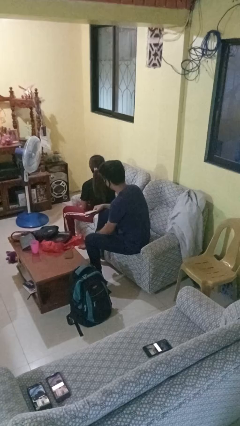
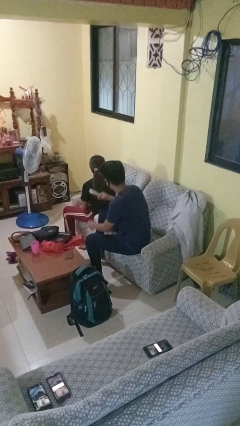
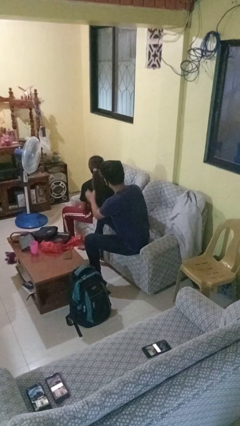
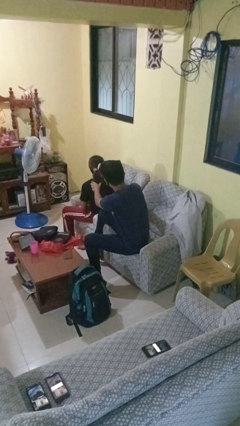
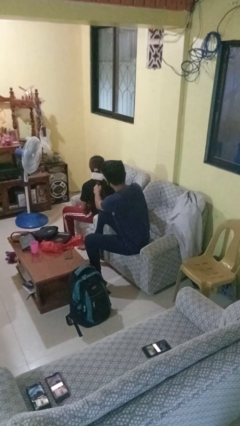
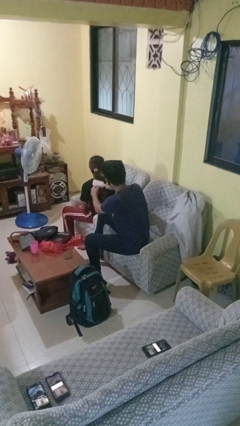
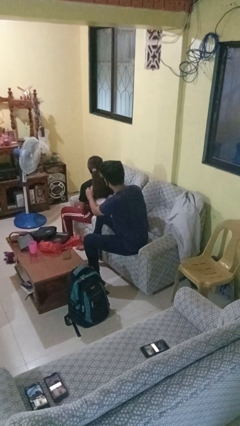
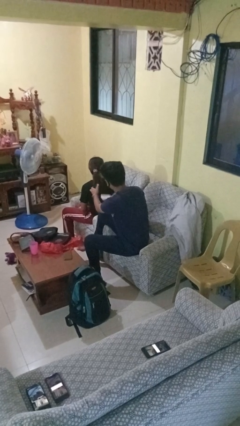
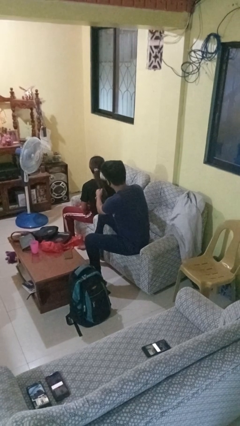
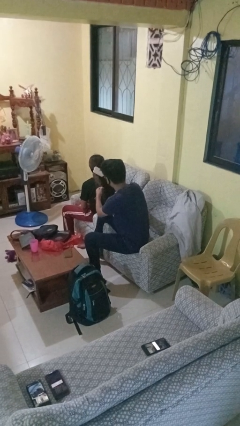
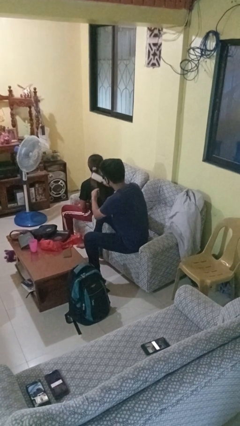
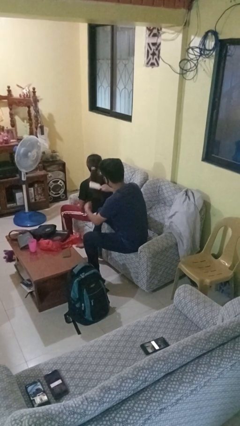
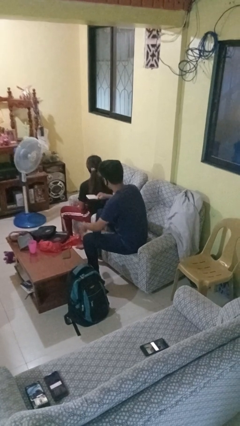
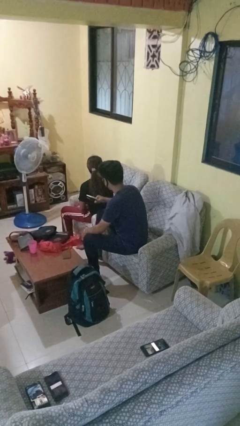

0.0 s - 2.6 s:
person brushes hair of person

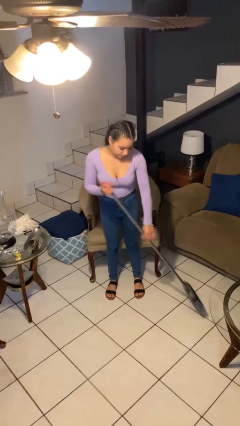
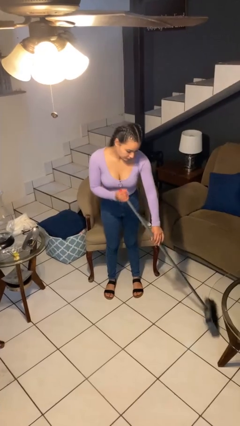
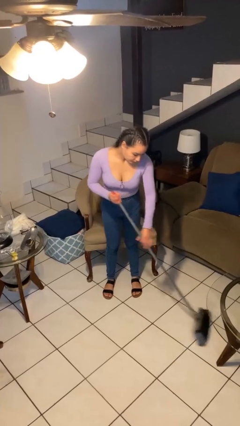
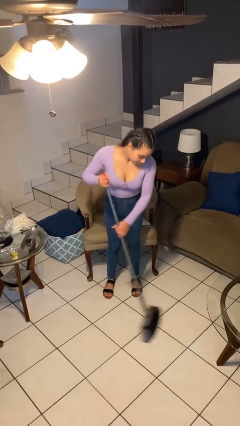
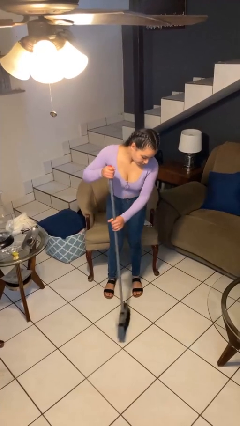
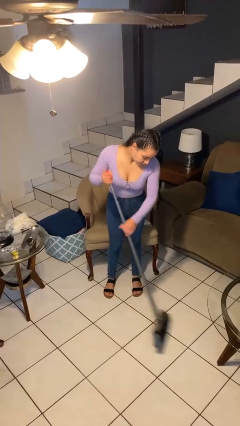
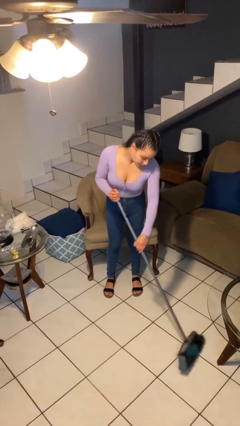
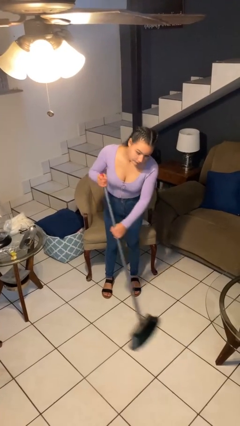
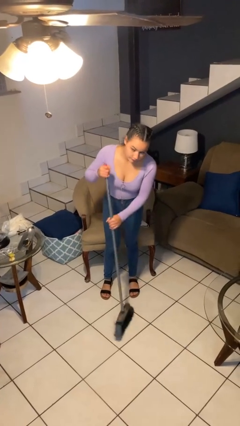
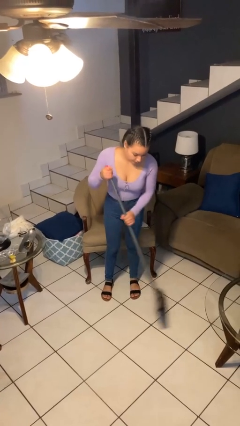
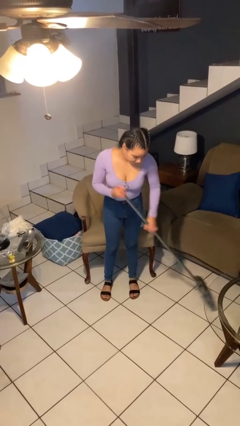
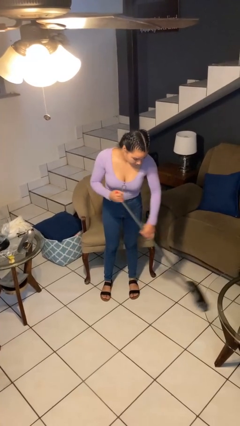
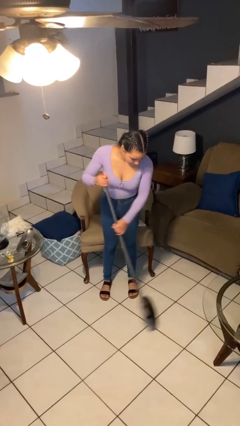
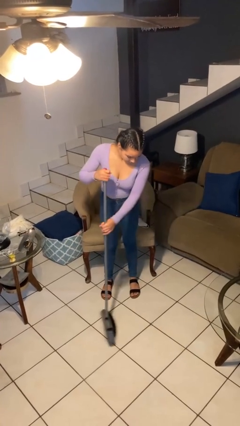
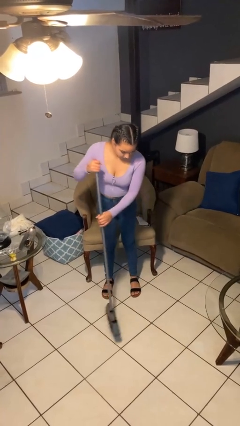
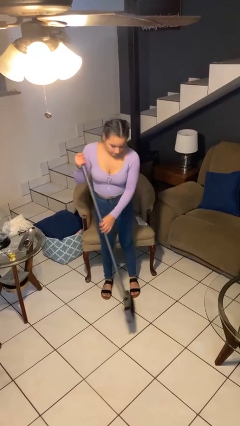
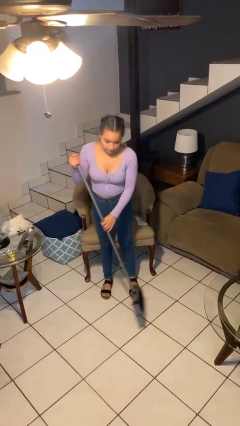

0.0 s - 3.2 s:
person sweeps floor

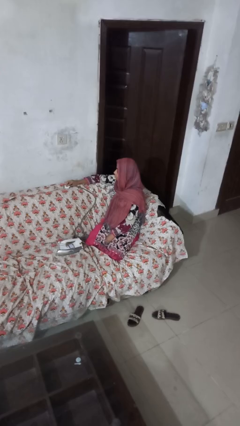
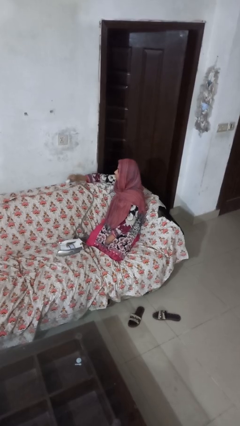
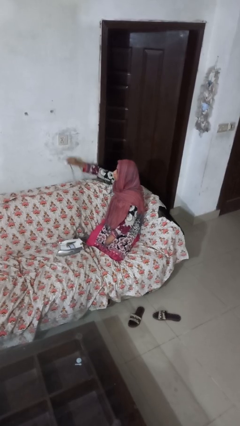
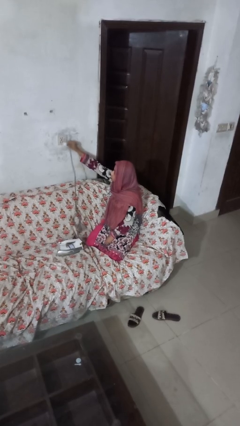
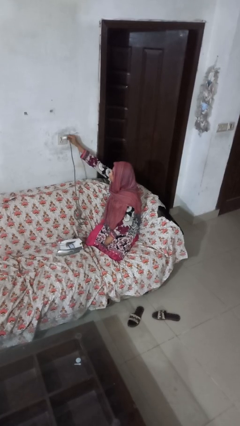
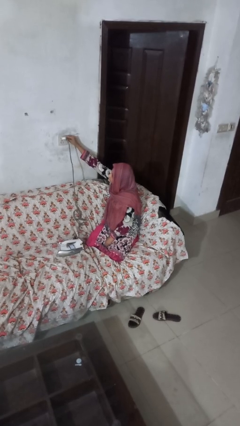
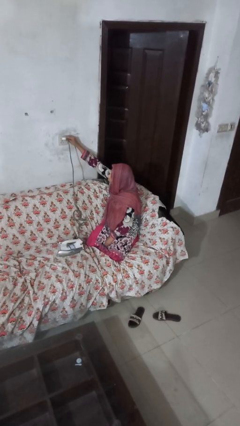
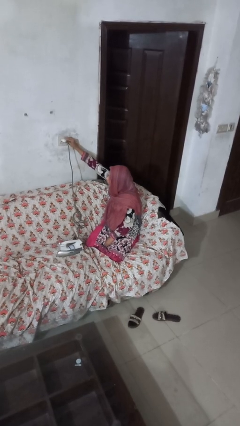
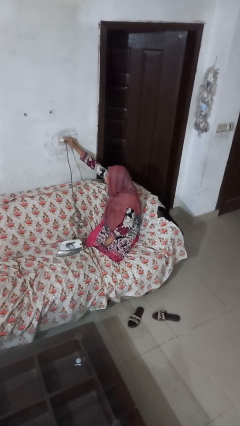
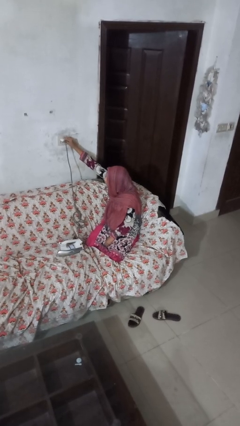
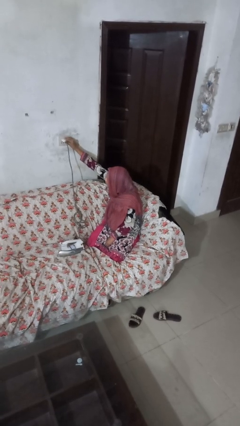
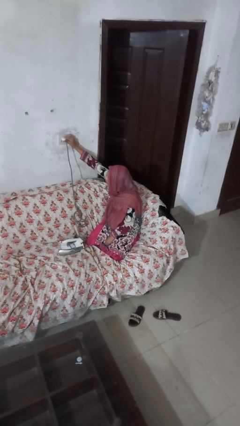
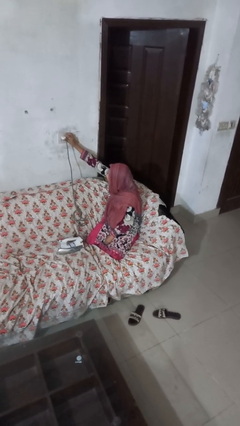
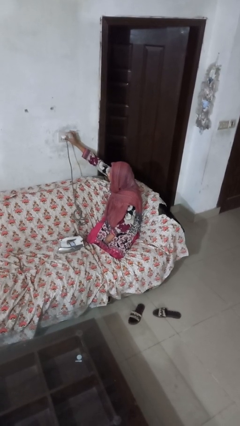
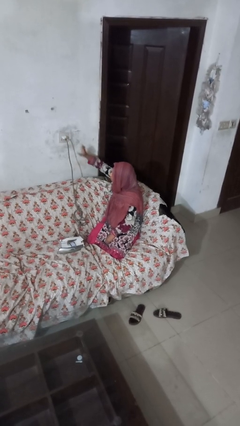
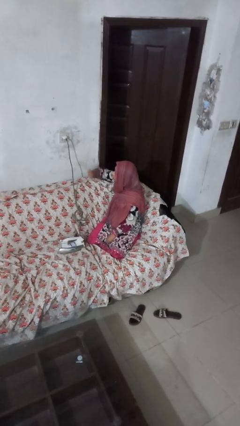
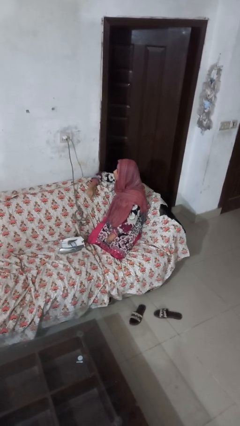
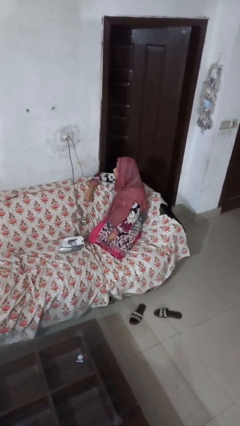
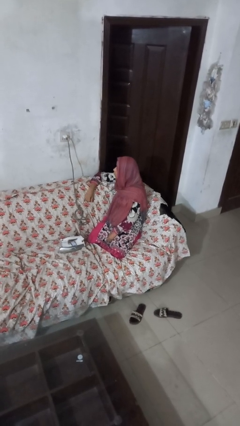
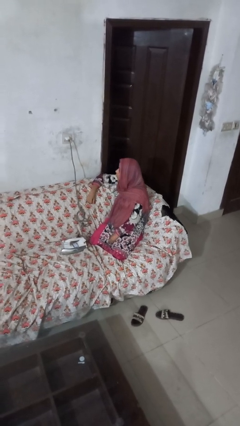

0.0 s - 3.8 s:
person plugs into electrical socket

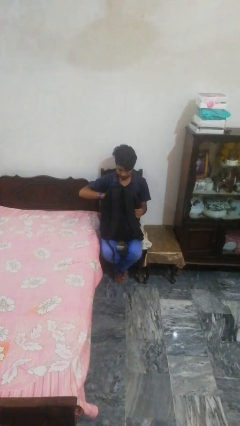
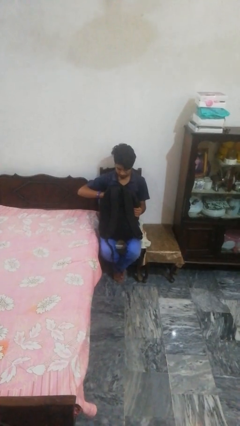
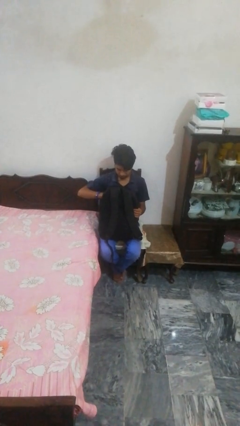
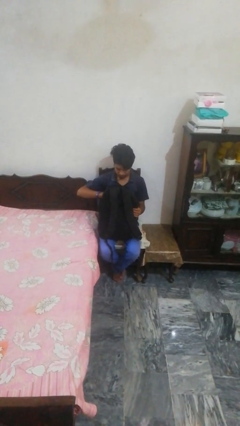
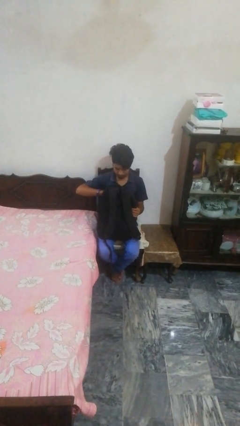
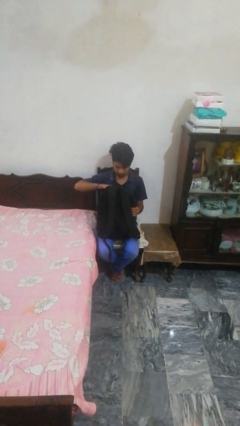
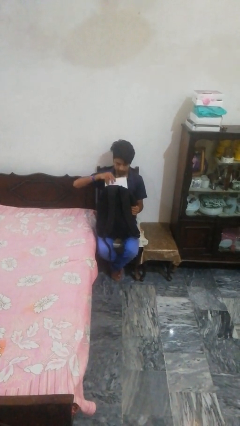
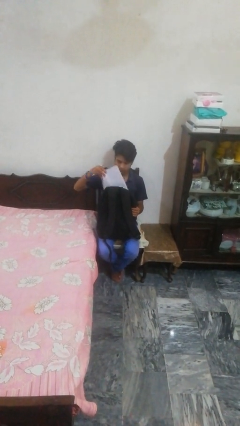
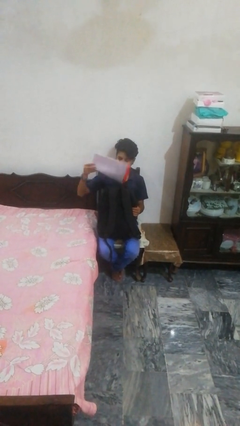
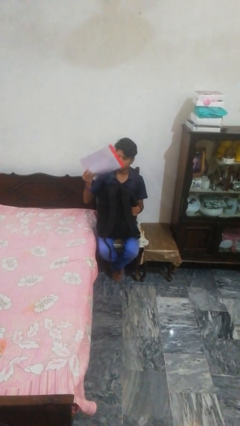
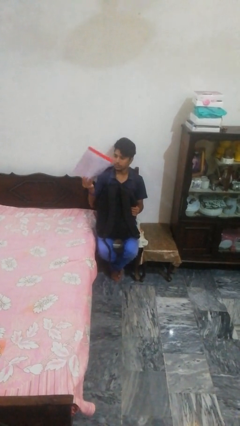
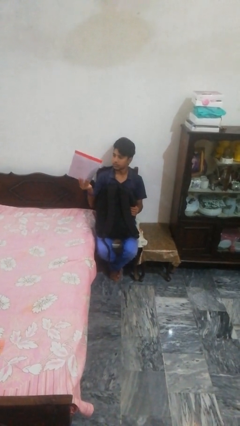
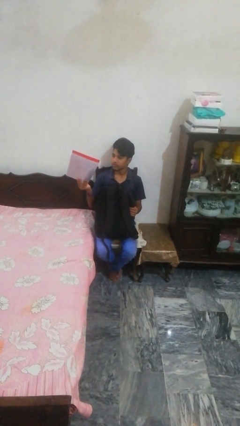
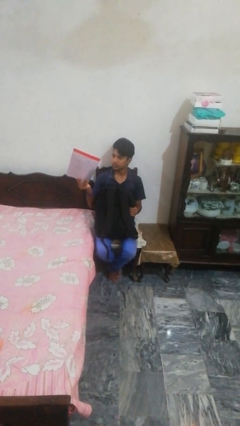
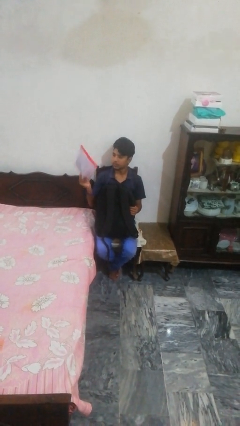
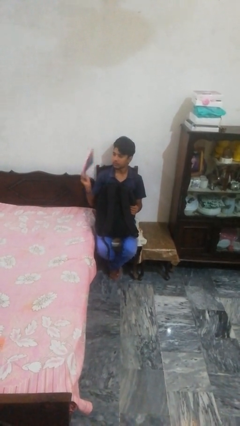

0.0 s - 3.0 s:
person takes object from backpack

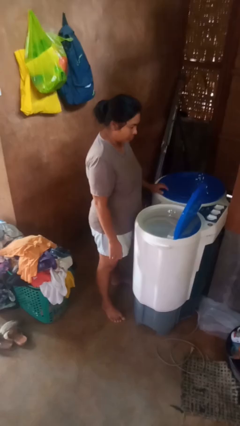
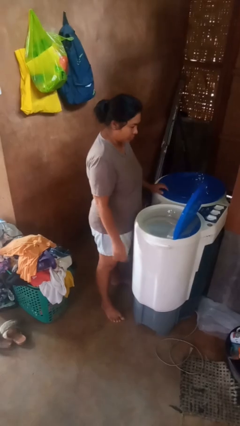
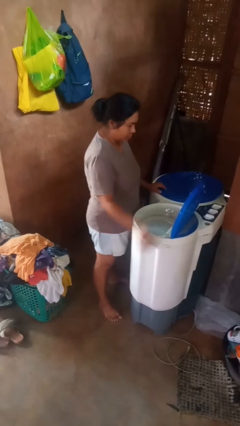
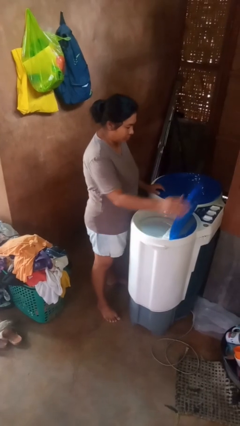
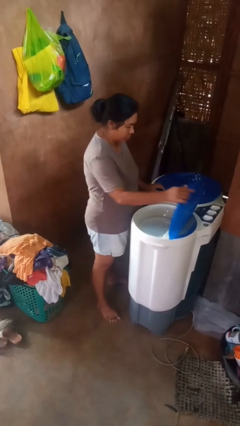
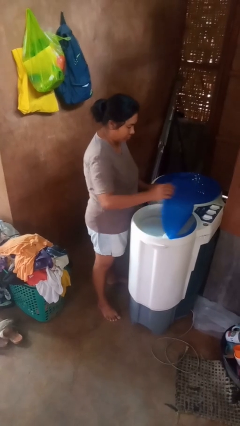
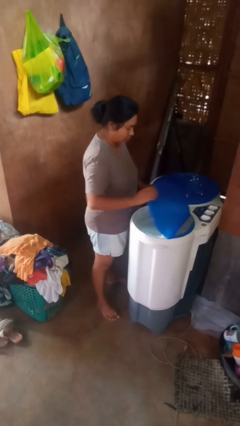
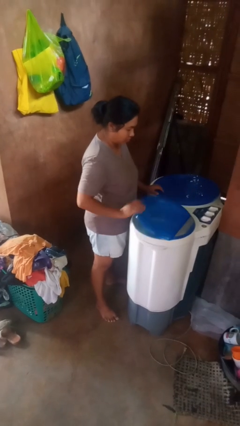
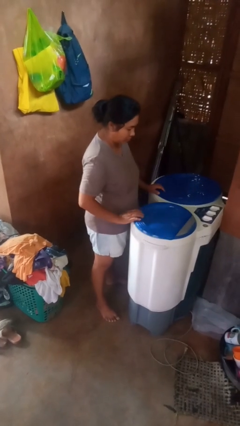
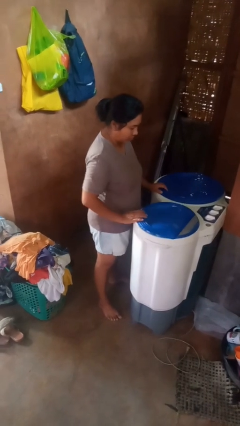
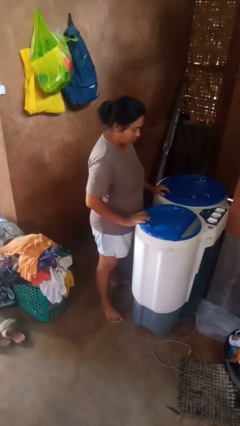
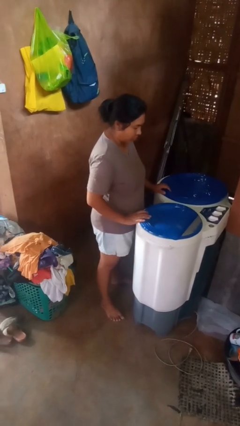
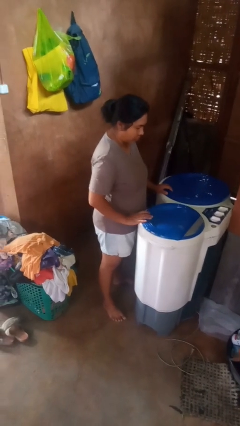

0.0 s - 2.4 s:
person closes clothes washer

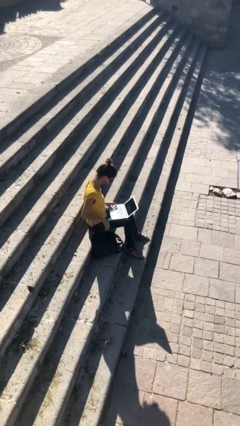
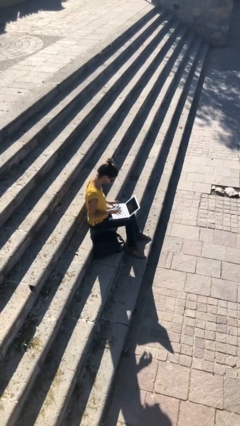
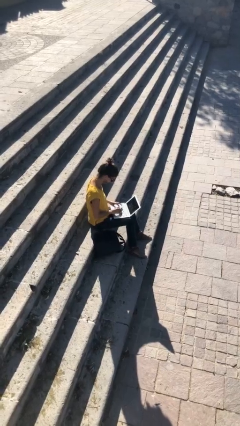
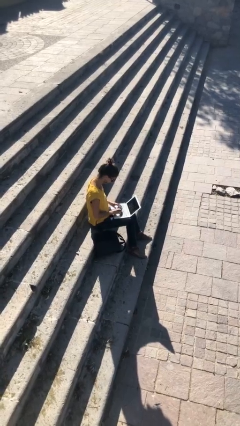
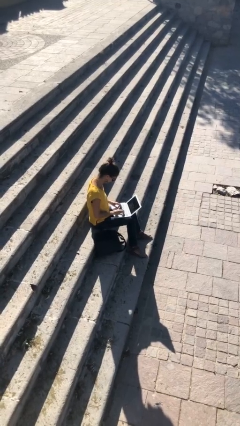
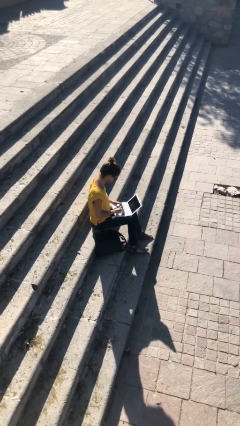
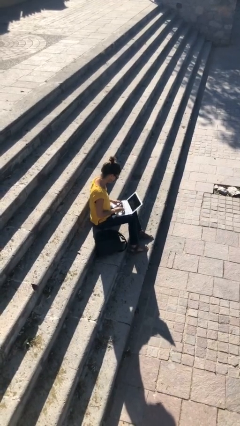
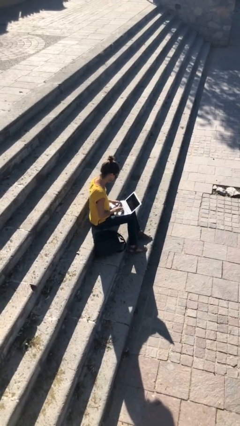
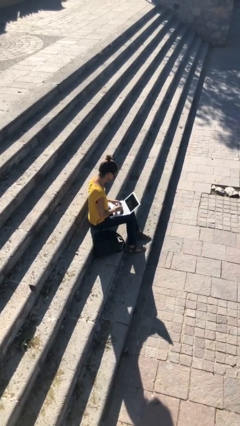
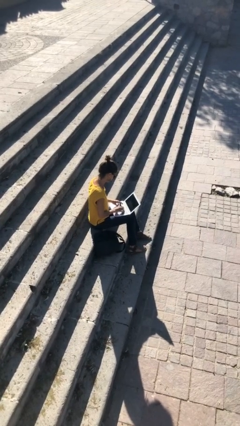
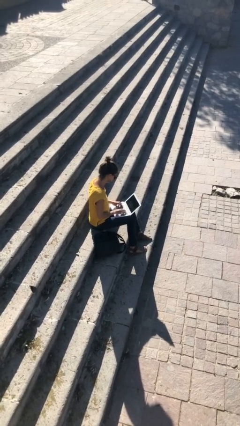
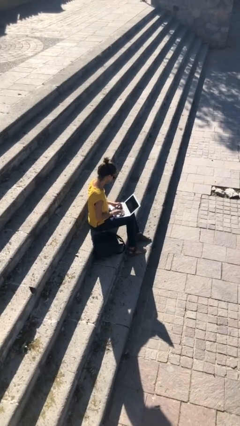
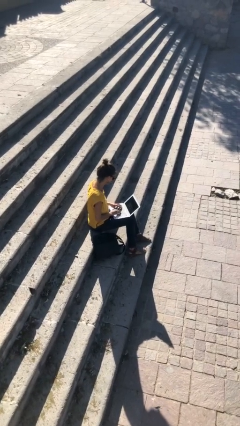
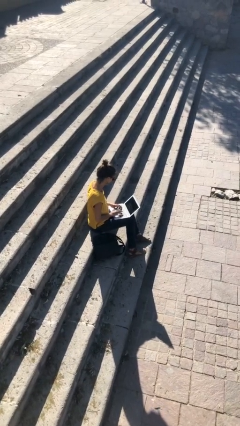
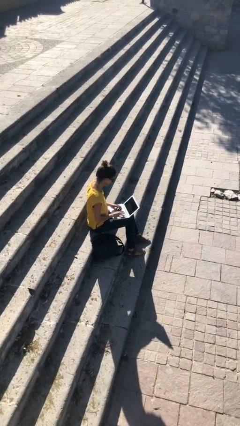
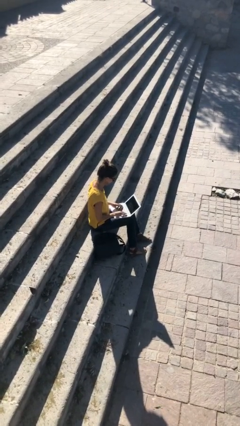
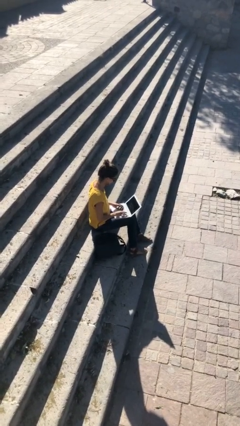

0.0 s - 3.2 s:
person interacts with laptop
